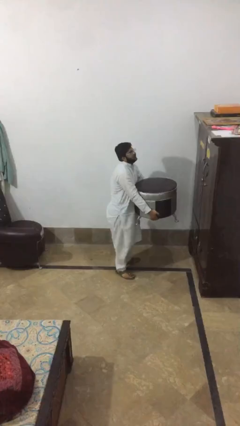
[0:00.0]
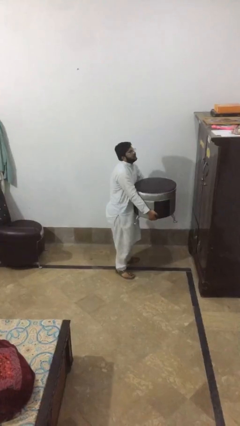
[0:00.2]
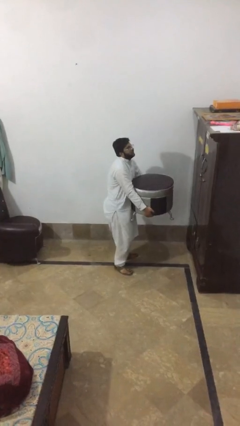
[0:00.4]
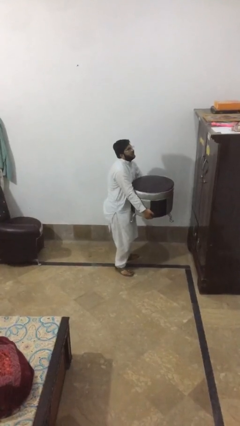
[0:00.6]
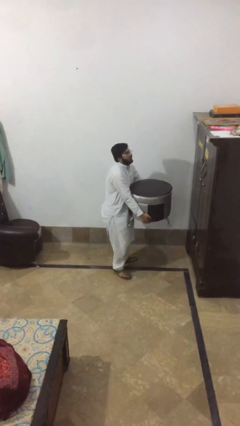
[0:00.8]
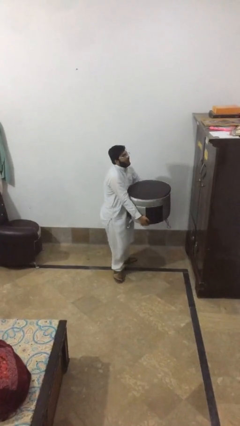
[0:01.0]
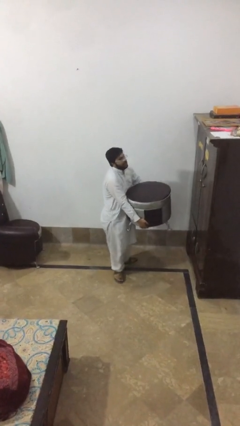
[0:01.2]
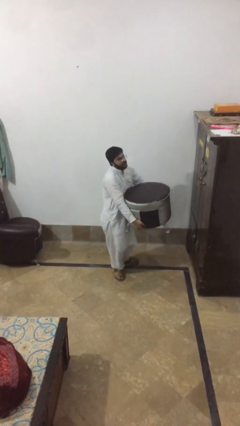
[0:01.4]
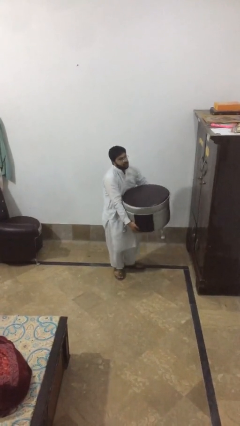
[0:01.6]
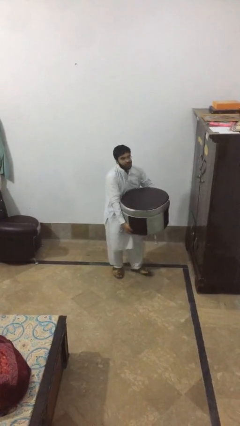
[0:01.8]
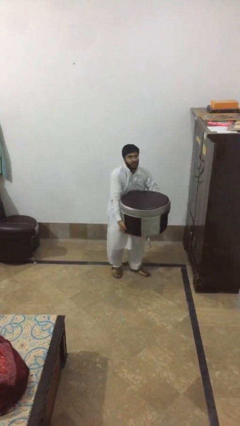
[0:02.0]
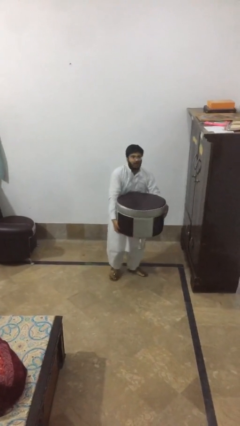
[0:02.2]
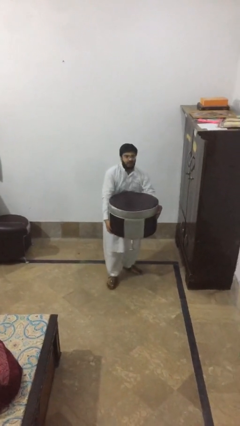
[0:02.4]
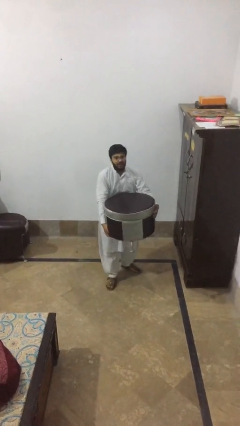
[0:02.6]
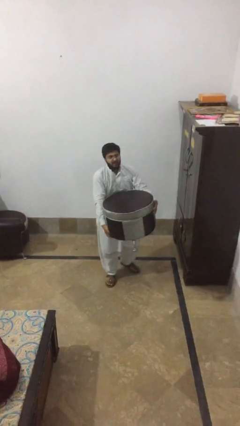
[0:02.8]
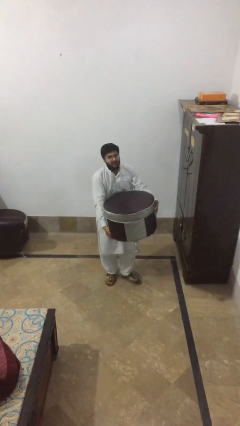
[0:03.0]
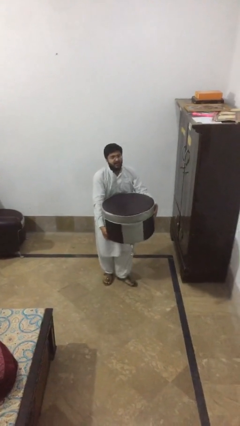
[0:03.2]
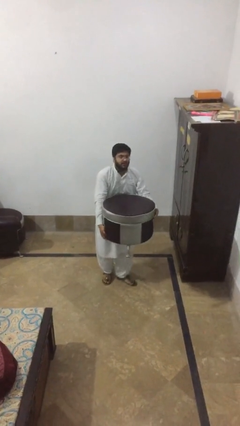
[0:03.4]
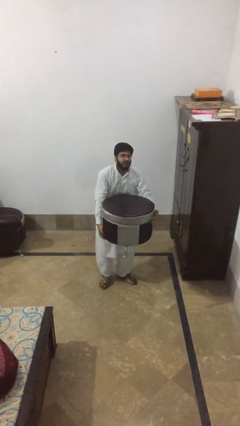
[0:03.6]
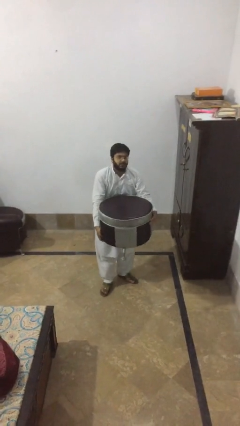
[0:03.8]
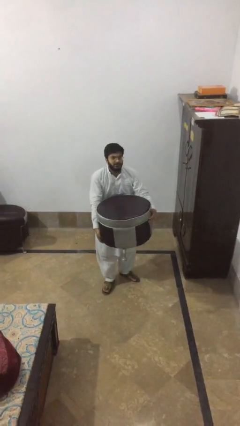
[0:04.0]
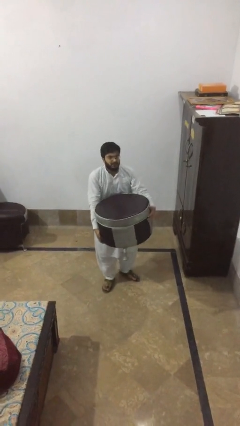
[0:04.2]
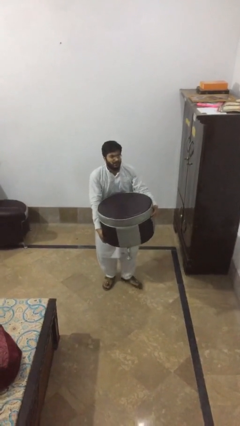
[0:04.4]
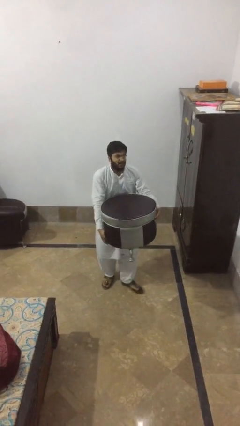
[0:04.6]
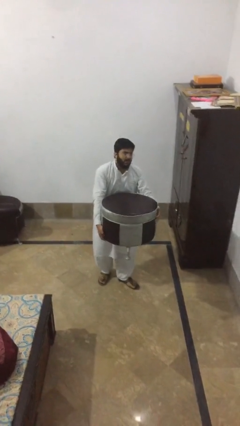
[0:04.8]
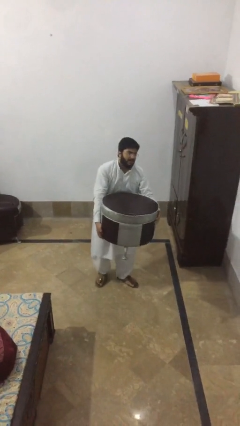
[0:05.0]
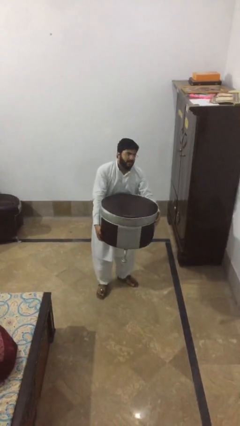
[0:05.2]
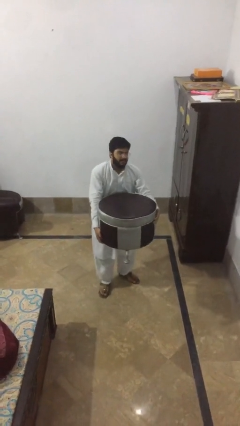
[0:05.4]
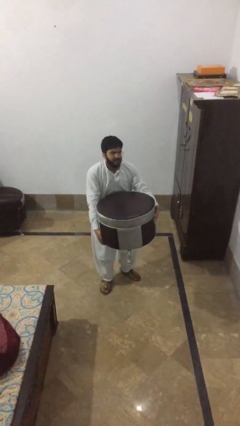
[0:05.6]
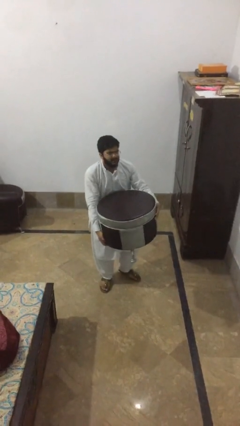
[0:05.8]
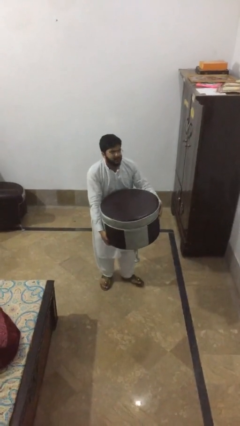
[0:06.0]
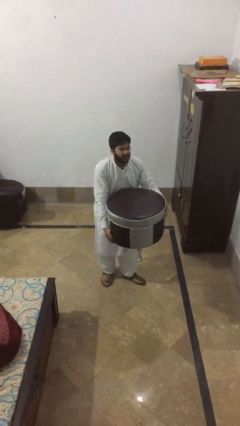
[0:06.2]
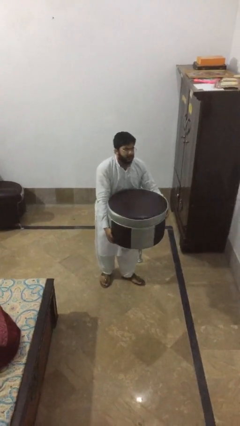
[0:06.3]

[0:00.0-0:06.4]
person carries heavy object

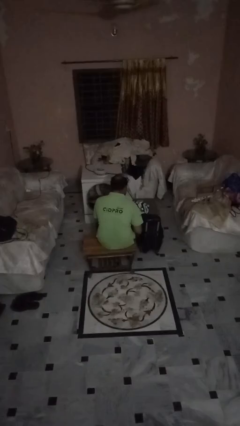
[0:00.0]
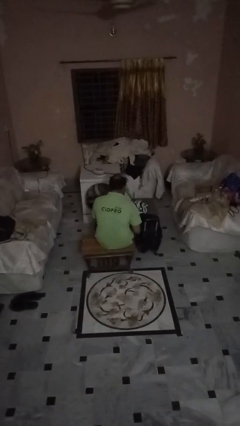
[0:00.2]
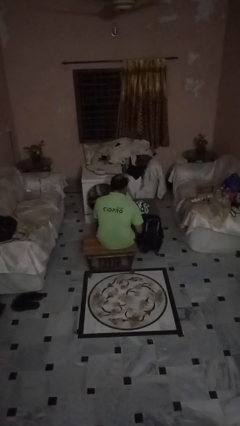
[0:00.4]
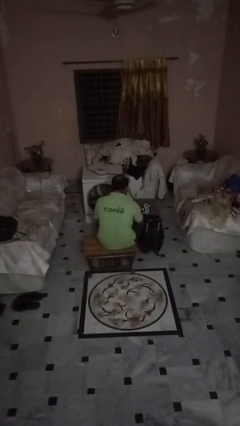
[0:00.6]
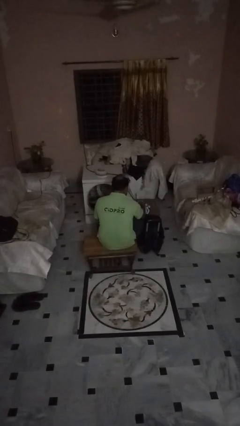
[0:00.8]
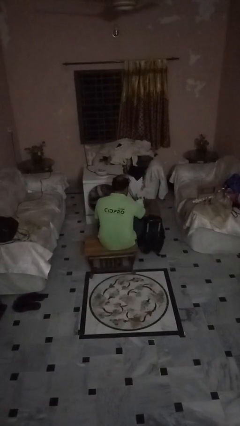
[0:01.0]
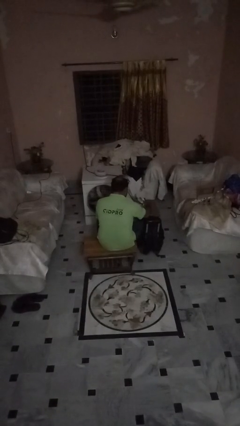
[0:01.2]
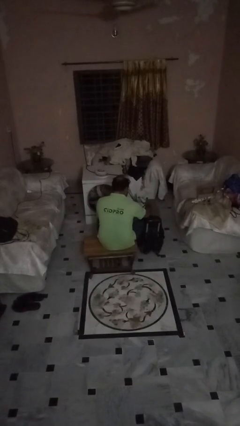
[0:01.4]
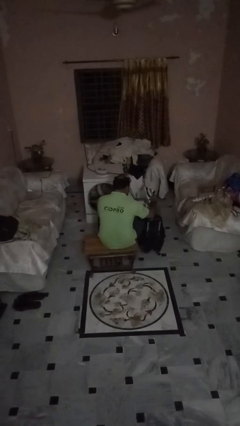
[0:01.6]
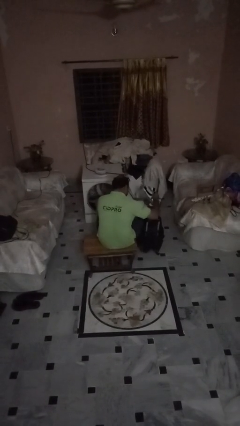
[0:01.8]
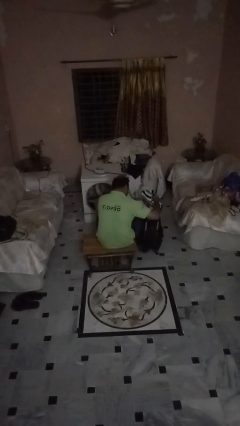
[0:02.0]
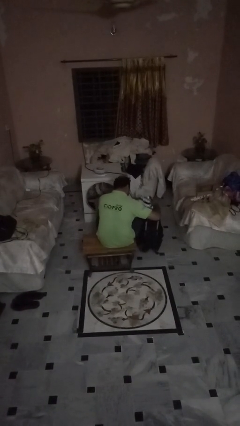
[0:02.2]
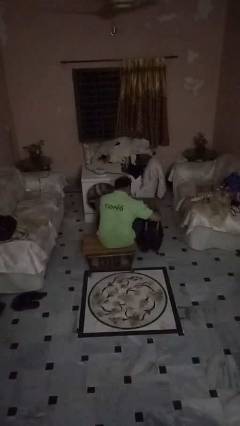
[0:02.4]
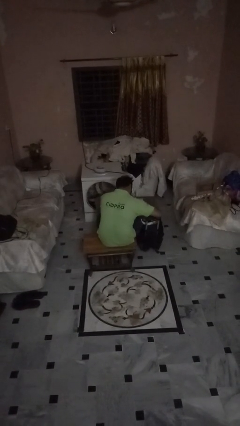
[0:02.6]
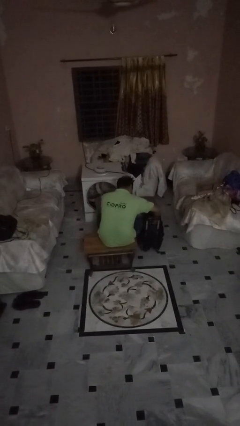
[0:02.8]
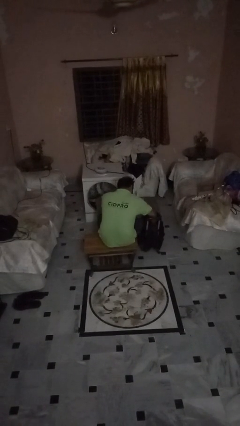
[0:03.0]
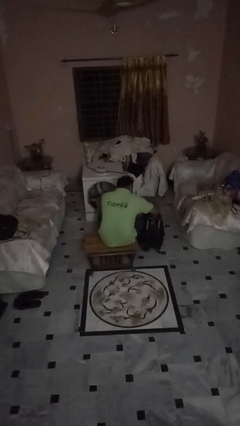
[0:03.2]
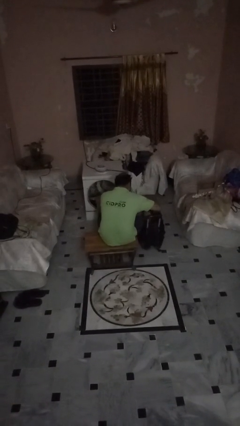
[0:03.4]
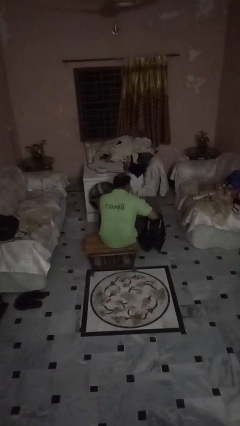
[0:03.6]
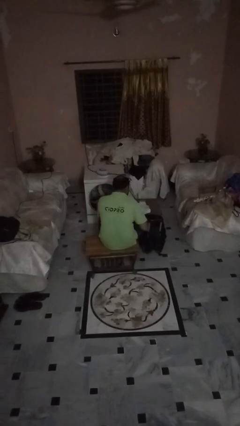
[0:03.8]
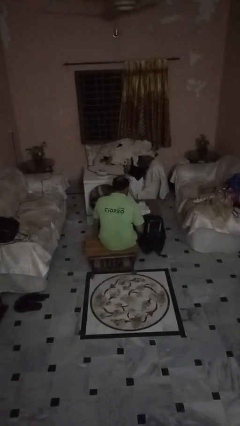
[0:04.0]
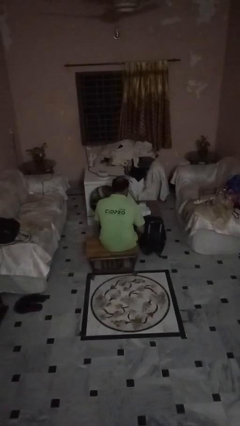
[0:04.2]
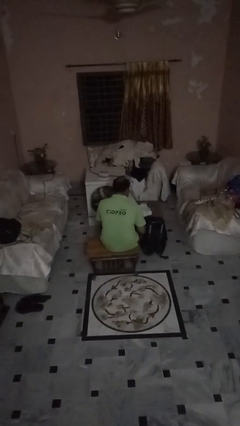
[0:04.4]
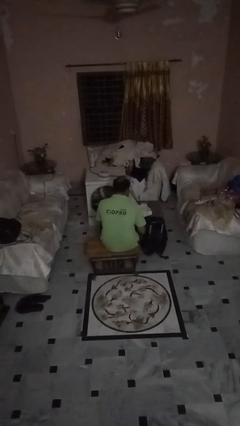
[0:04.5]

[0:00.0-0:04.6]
person loads clothes into suitcase

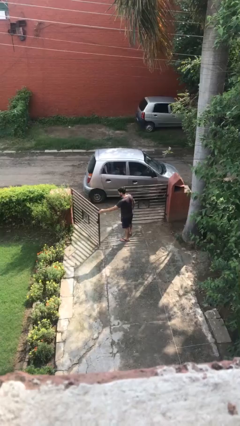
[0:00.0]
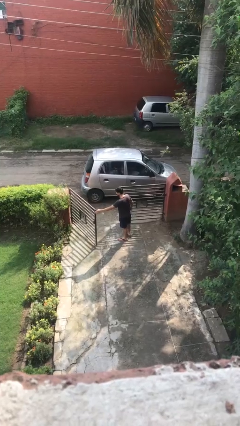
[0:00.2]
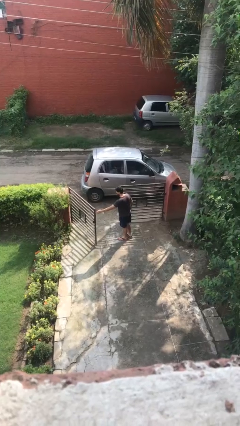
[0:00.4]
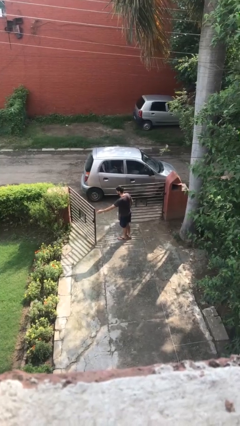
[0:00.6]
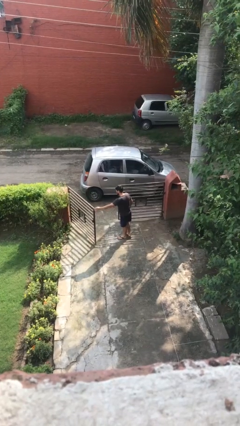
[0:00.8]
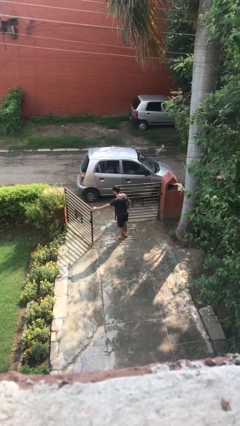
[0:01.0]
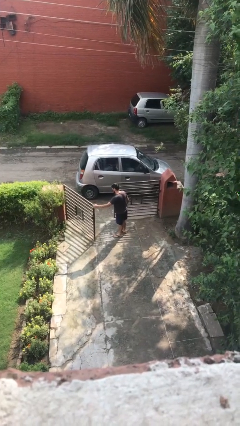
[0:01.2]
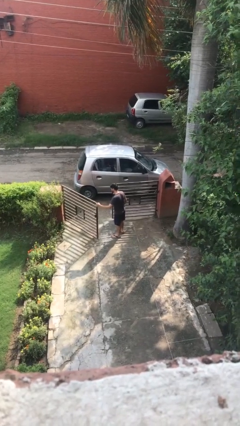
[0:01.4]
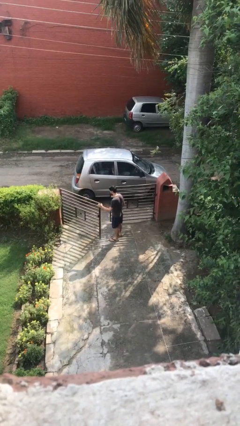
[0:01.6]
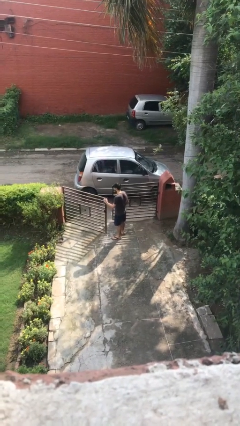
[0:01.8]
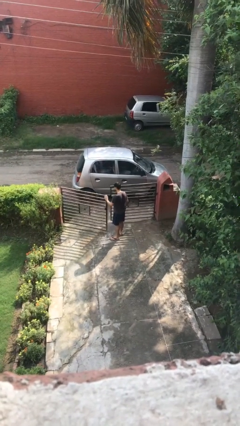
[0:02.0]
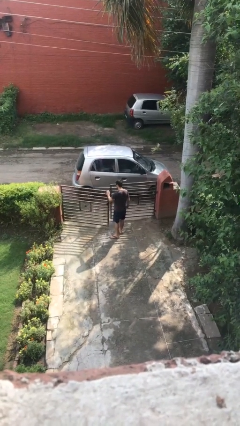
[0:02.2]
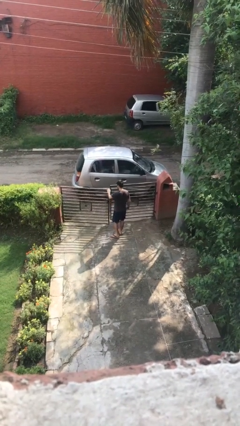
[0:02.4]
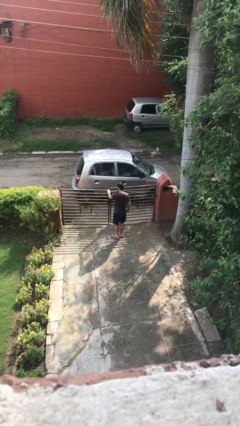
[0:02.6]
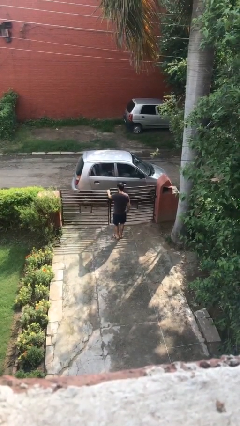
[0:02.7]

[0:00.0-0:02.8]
person closes gate

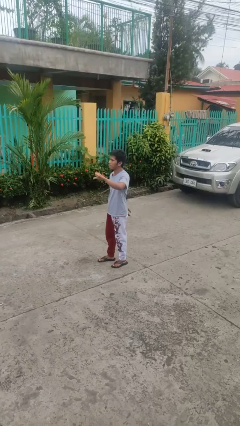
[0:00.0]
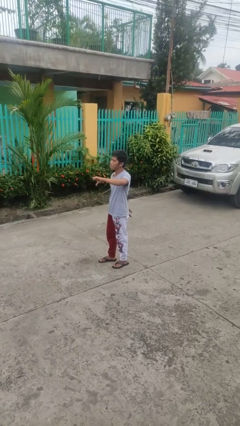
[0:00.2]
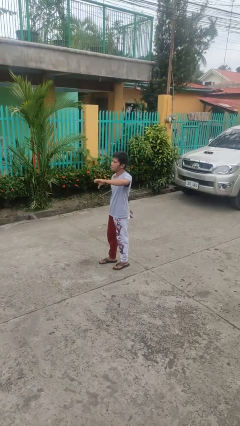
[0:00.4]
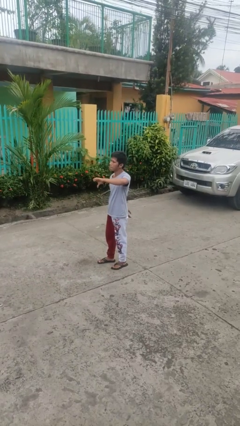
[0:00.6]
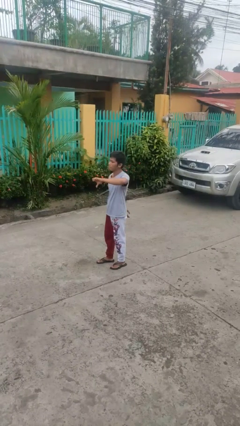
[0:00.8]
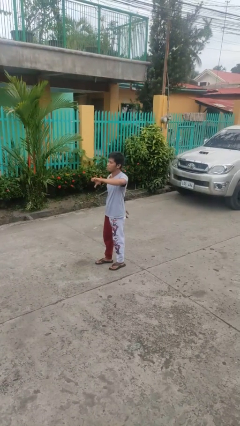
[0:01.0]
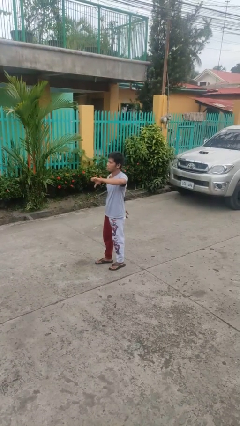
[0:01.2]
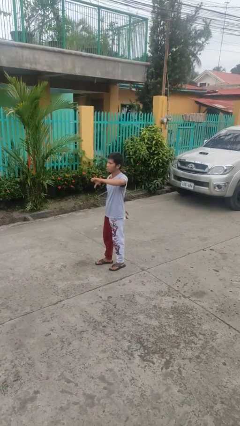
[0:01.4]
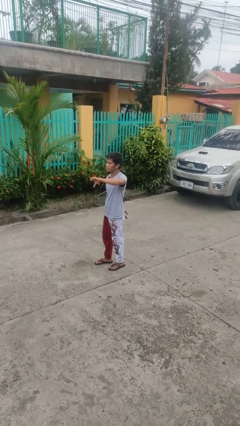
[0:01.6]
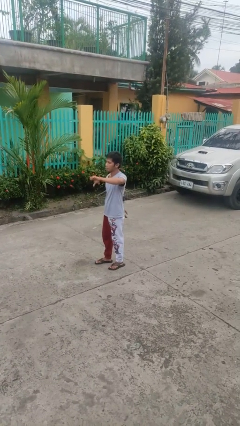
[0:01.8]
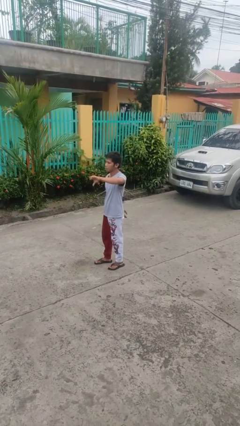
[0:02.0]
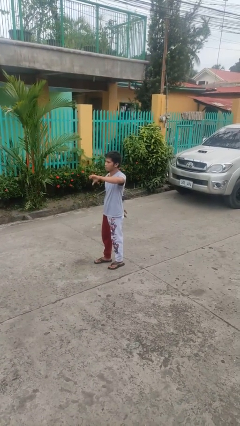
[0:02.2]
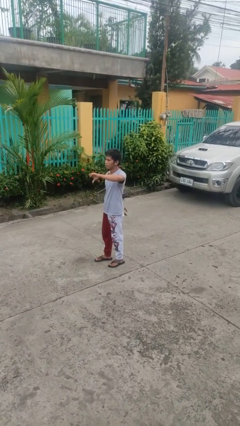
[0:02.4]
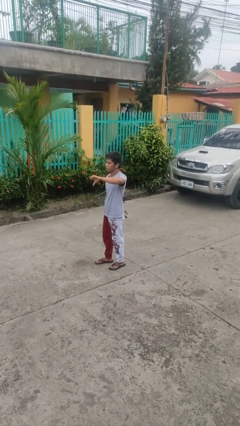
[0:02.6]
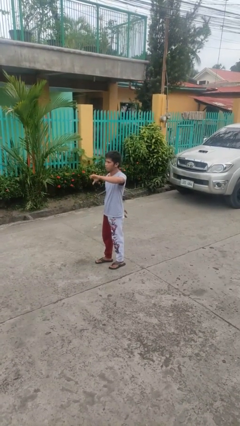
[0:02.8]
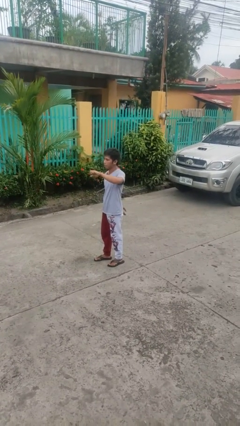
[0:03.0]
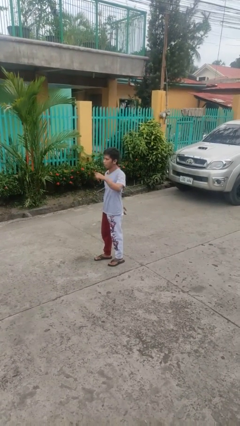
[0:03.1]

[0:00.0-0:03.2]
person gestures thumbs down

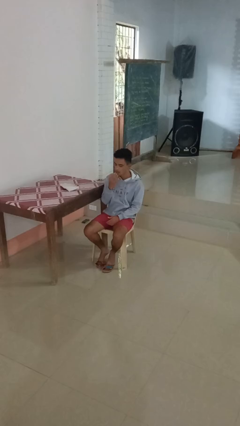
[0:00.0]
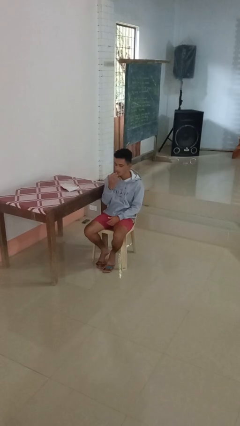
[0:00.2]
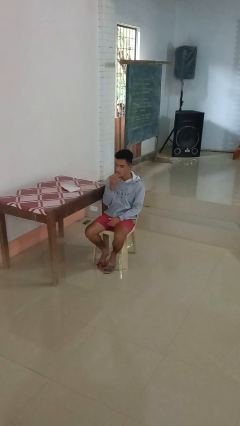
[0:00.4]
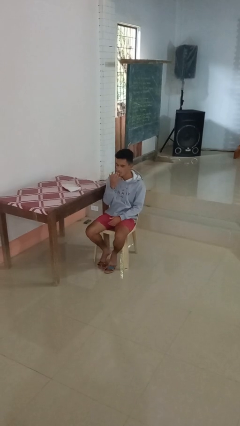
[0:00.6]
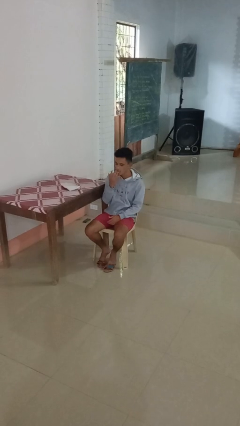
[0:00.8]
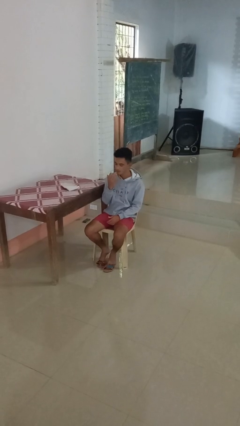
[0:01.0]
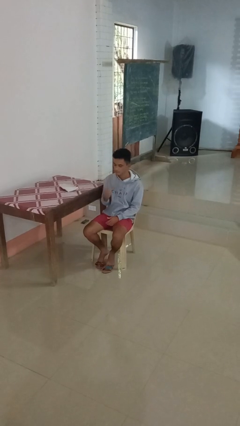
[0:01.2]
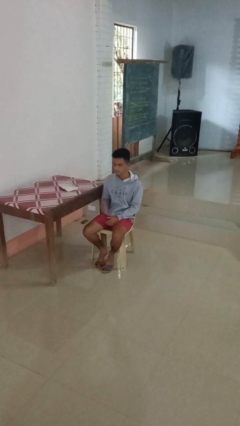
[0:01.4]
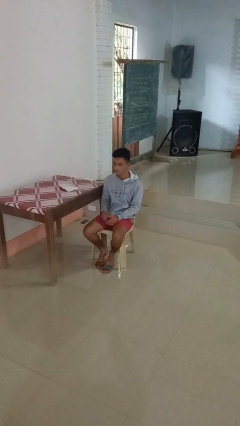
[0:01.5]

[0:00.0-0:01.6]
person licks fingers
